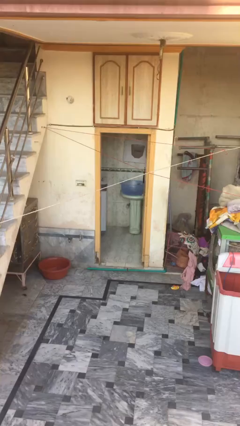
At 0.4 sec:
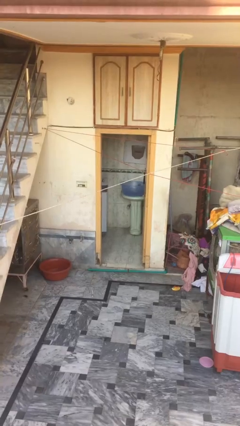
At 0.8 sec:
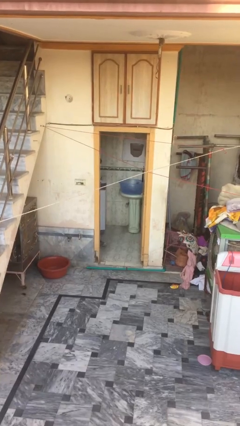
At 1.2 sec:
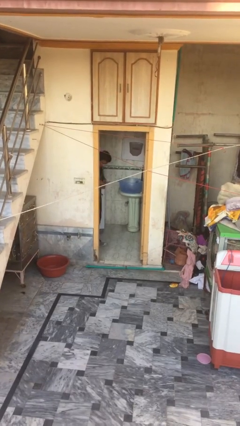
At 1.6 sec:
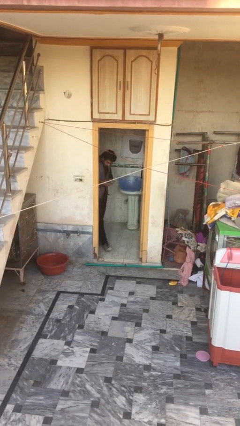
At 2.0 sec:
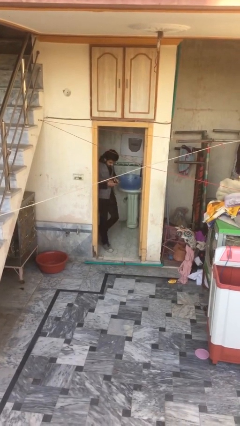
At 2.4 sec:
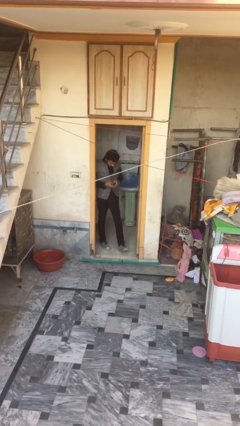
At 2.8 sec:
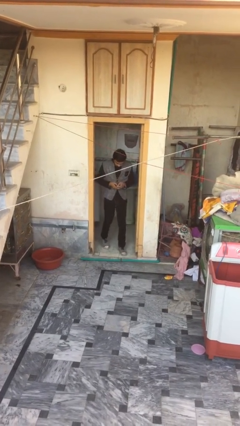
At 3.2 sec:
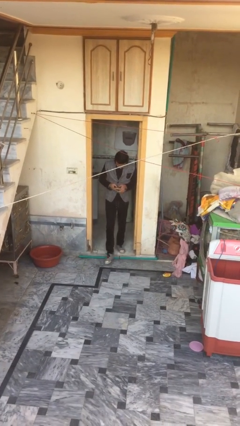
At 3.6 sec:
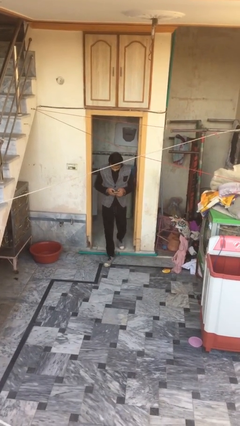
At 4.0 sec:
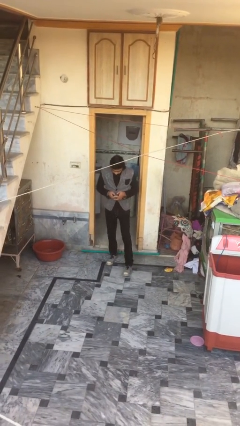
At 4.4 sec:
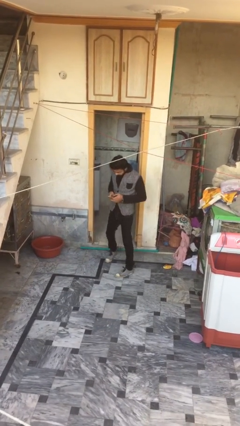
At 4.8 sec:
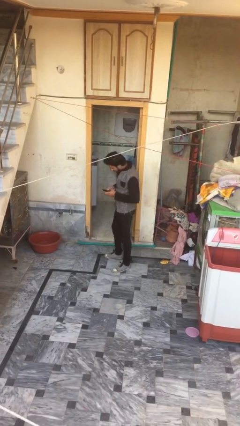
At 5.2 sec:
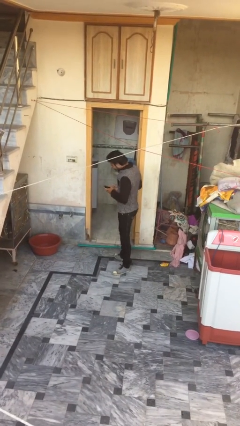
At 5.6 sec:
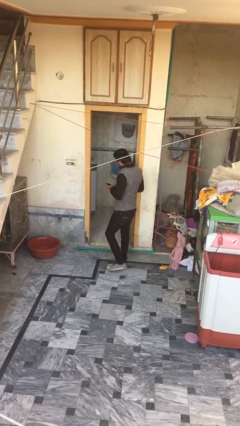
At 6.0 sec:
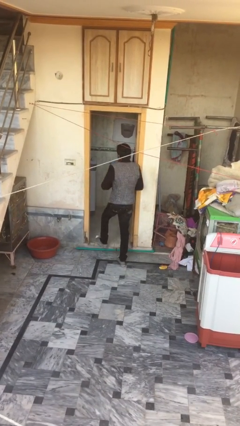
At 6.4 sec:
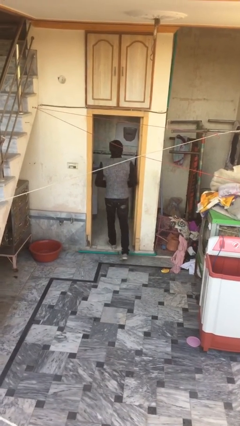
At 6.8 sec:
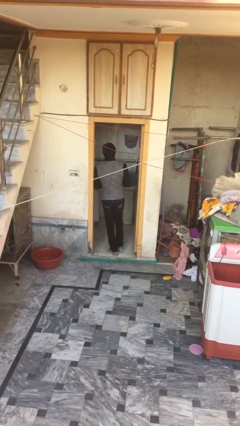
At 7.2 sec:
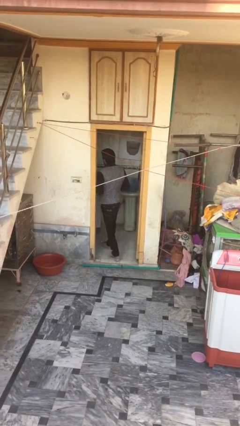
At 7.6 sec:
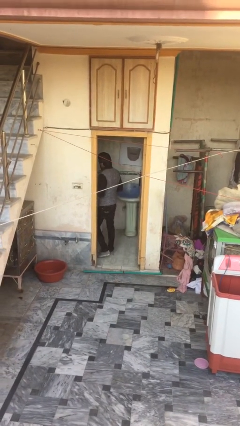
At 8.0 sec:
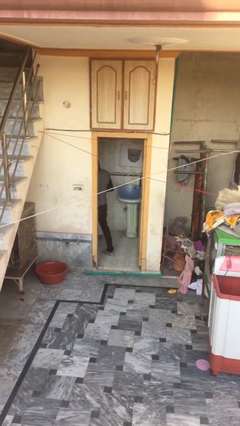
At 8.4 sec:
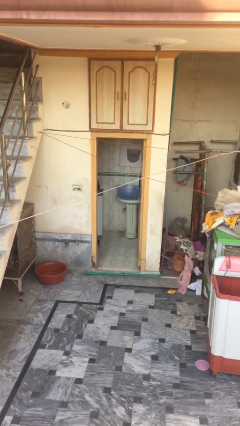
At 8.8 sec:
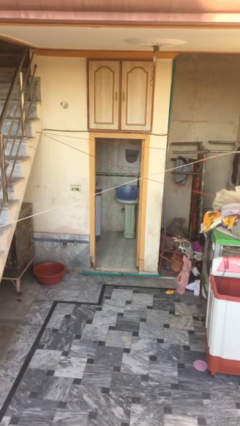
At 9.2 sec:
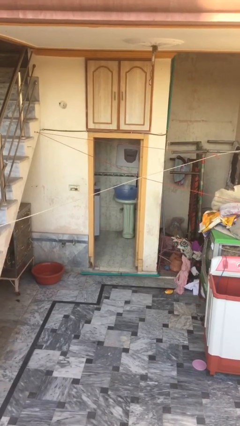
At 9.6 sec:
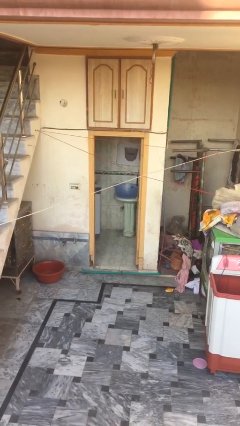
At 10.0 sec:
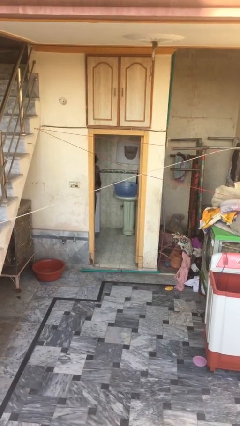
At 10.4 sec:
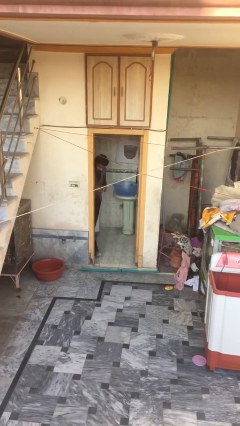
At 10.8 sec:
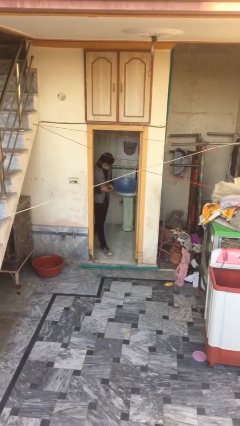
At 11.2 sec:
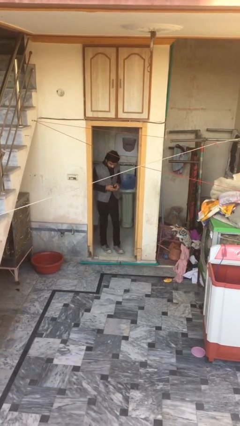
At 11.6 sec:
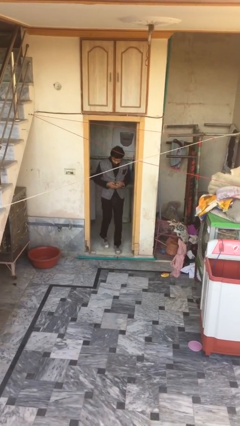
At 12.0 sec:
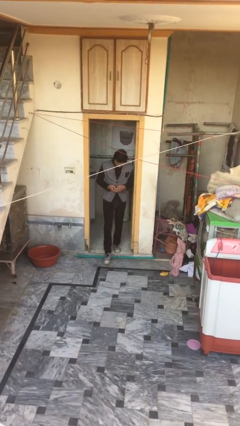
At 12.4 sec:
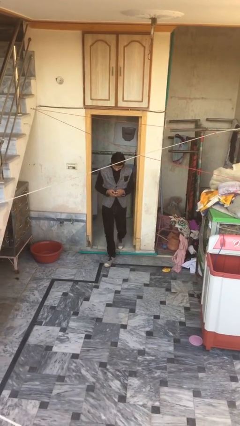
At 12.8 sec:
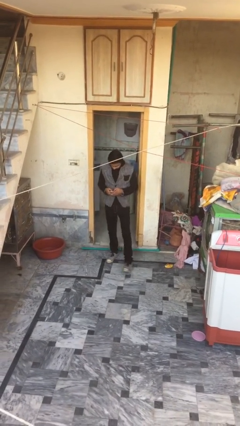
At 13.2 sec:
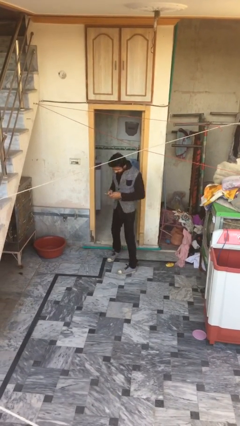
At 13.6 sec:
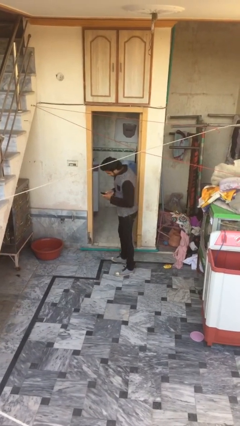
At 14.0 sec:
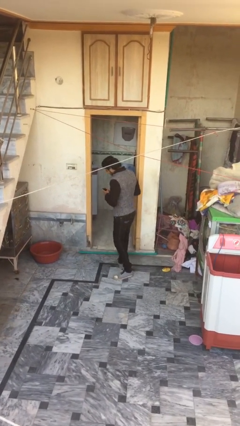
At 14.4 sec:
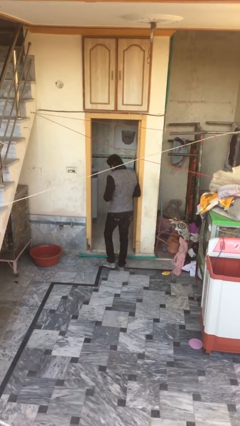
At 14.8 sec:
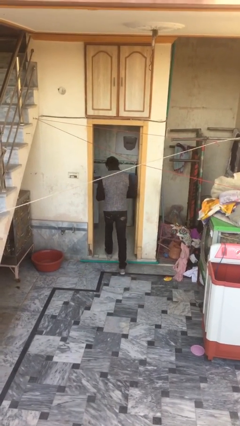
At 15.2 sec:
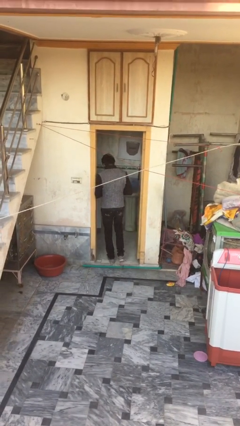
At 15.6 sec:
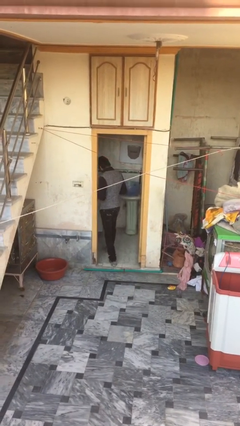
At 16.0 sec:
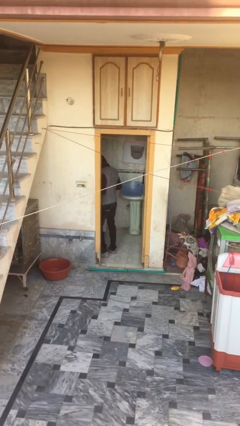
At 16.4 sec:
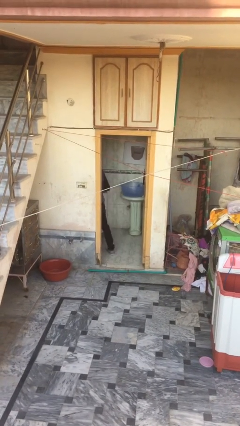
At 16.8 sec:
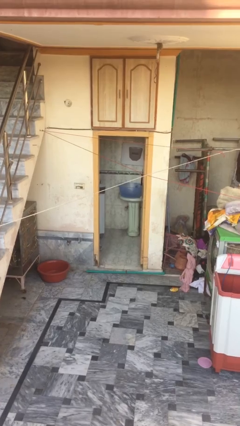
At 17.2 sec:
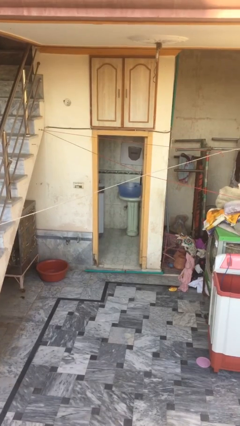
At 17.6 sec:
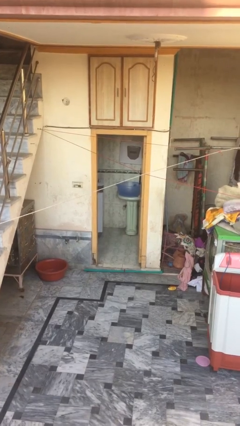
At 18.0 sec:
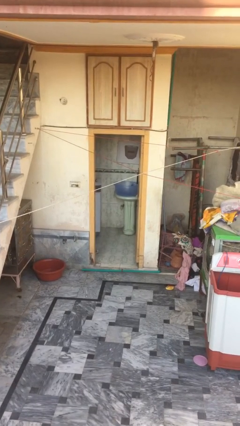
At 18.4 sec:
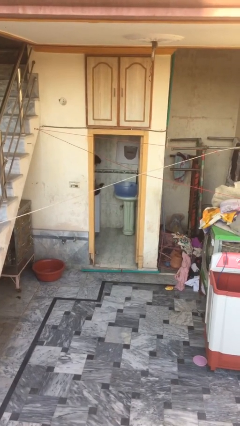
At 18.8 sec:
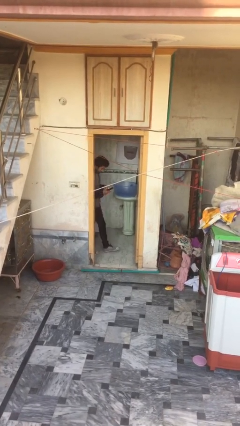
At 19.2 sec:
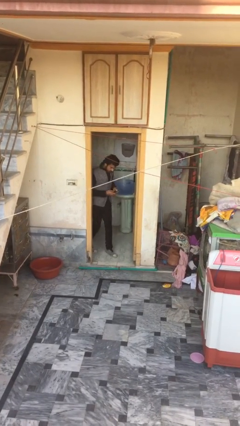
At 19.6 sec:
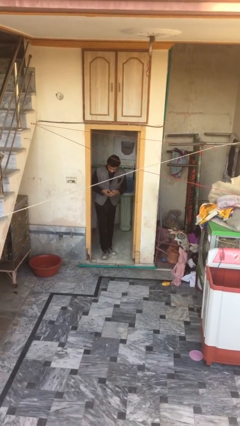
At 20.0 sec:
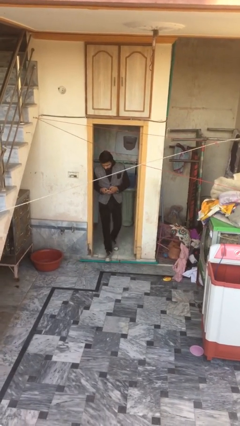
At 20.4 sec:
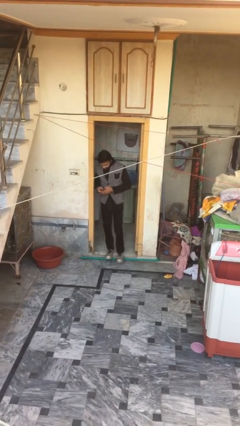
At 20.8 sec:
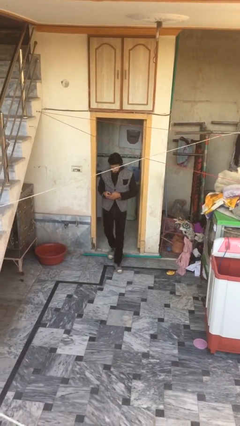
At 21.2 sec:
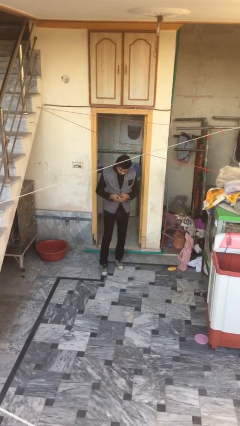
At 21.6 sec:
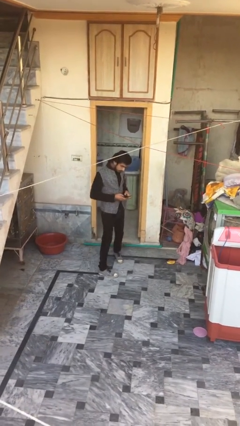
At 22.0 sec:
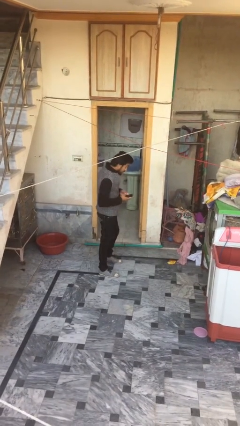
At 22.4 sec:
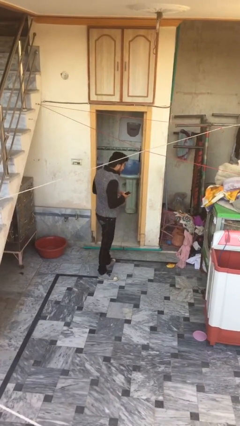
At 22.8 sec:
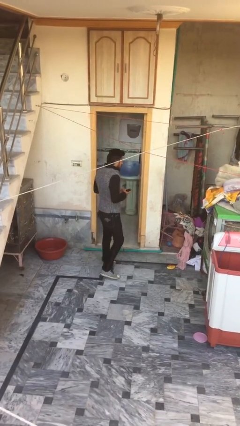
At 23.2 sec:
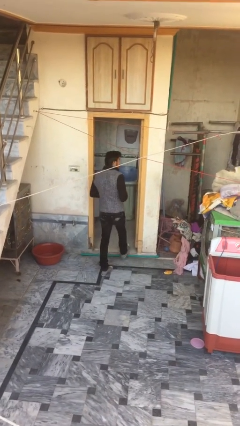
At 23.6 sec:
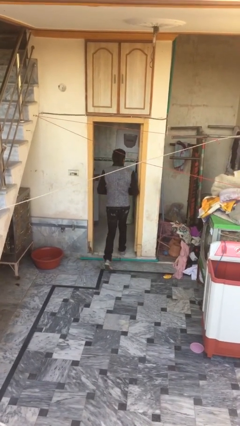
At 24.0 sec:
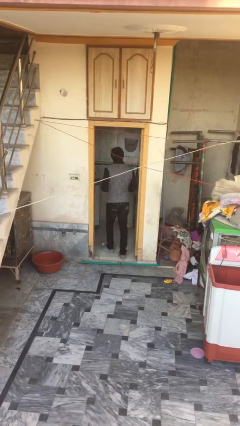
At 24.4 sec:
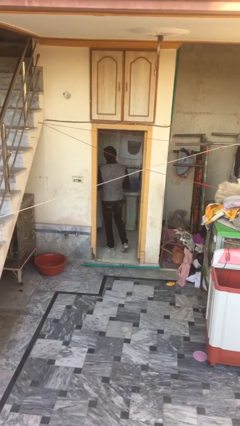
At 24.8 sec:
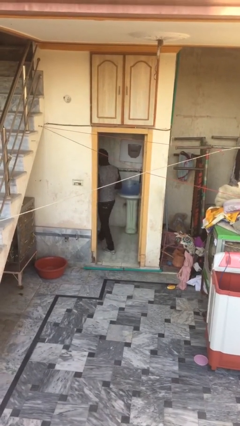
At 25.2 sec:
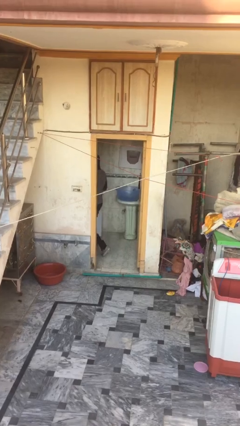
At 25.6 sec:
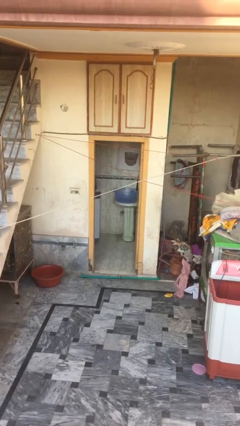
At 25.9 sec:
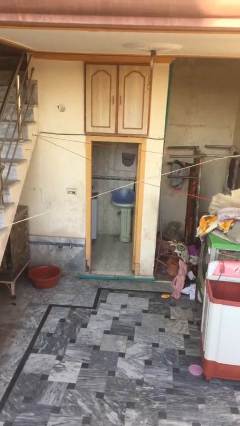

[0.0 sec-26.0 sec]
person texts on phone

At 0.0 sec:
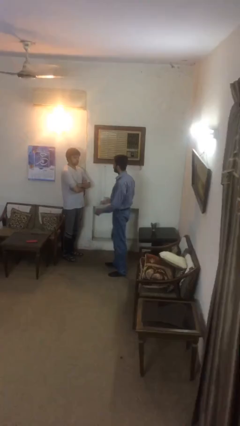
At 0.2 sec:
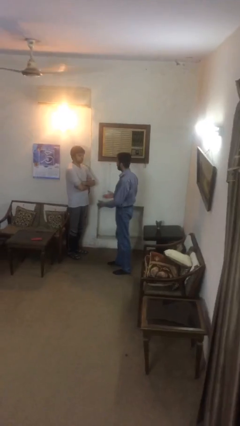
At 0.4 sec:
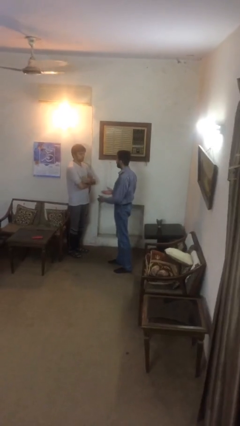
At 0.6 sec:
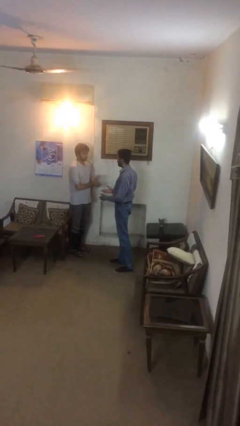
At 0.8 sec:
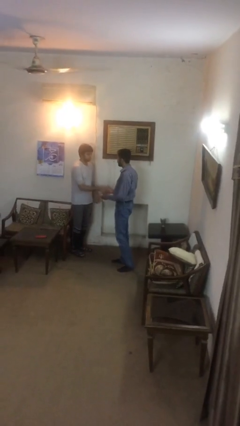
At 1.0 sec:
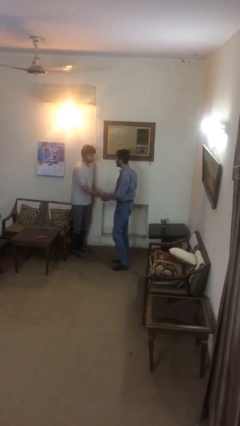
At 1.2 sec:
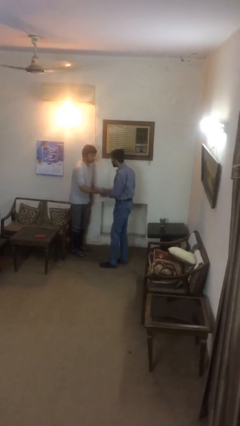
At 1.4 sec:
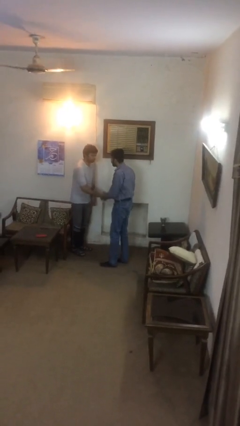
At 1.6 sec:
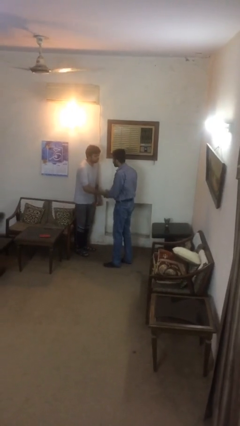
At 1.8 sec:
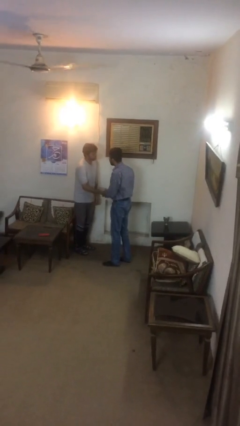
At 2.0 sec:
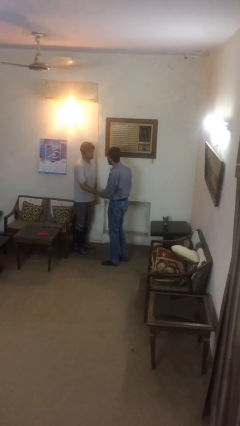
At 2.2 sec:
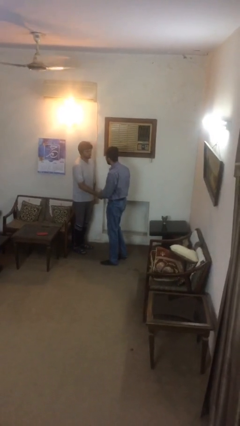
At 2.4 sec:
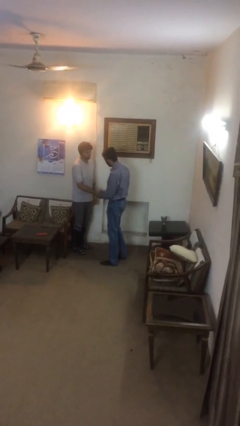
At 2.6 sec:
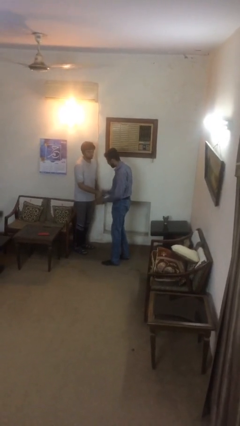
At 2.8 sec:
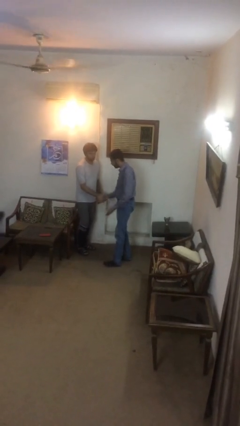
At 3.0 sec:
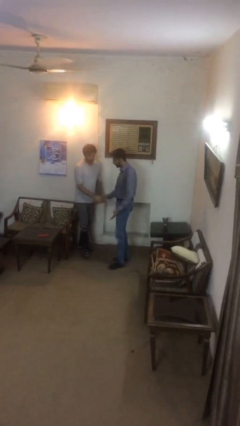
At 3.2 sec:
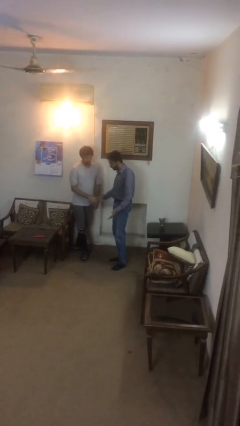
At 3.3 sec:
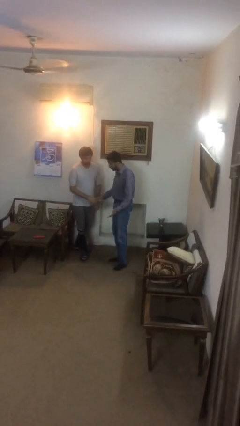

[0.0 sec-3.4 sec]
person shakes hand

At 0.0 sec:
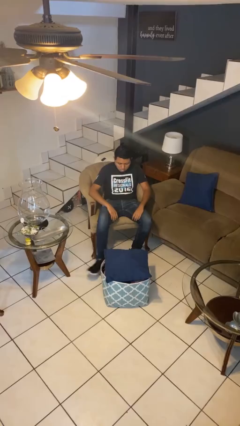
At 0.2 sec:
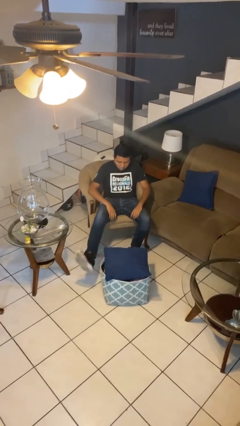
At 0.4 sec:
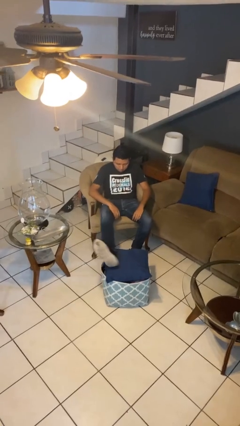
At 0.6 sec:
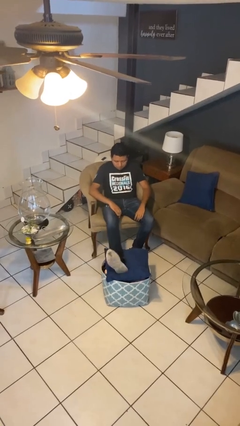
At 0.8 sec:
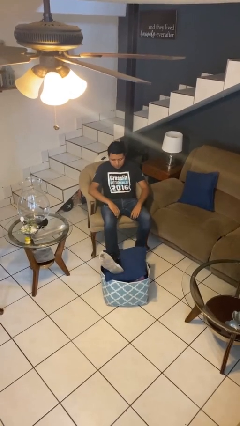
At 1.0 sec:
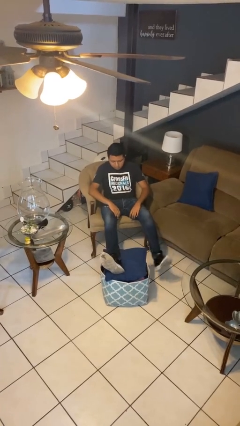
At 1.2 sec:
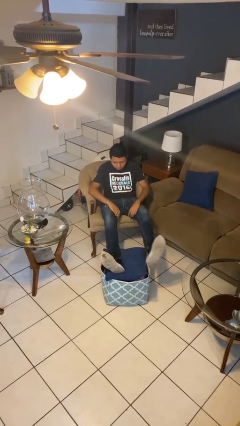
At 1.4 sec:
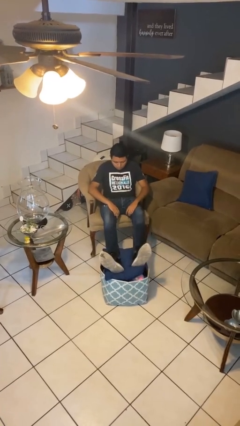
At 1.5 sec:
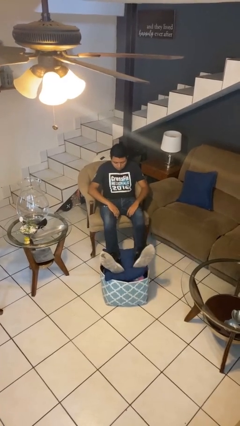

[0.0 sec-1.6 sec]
person puts feet up
